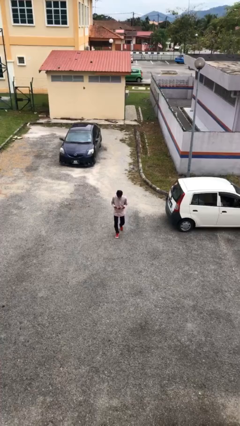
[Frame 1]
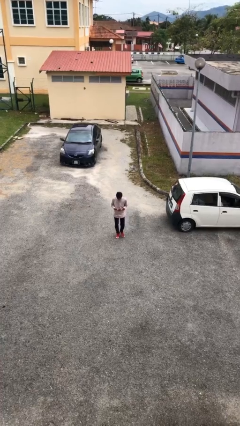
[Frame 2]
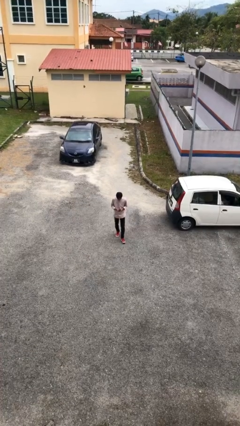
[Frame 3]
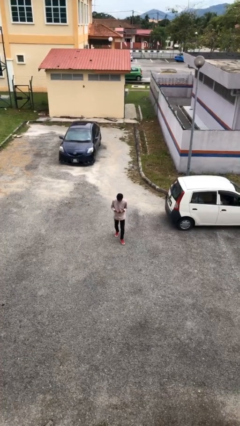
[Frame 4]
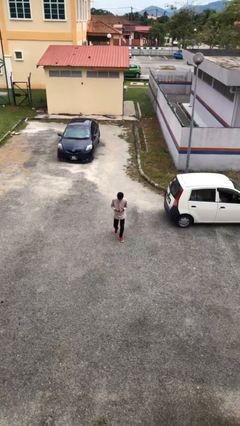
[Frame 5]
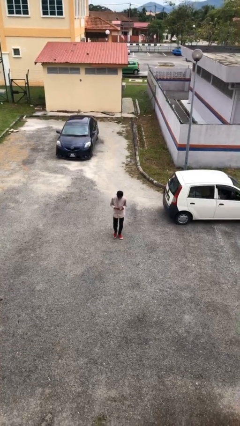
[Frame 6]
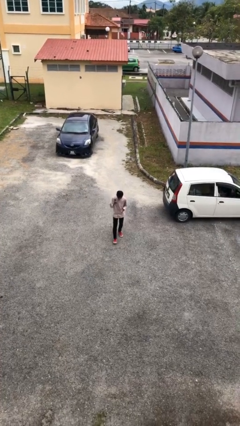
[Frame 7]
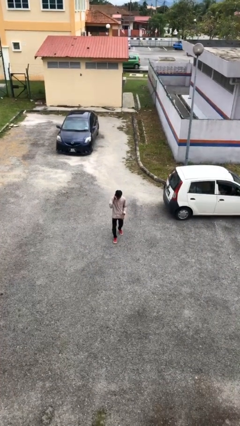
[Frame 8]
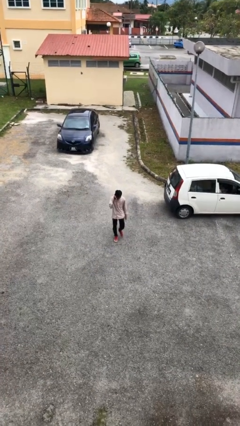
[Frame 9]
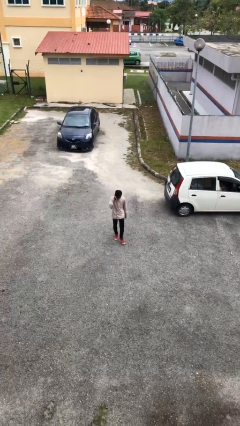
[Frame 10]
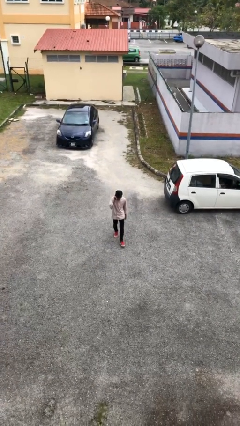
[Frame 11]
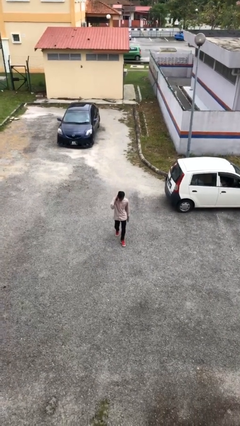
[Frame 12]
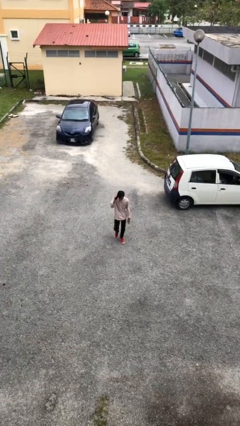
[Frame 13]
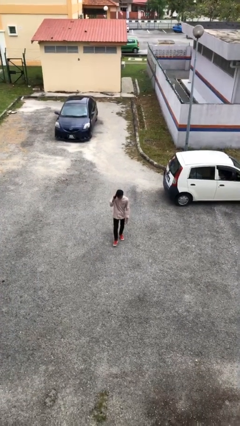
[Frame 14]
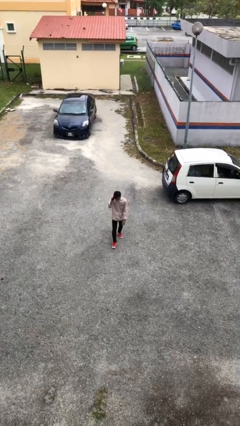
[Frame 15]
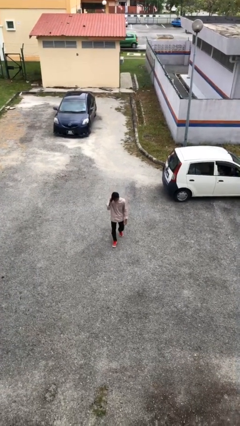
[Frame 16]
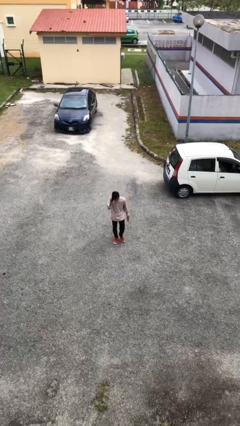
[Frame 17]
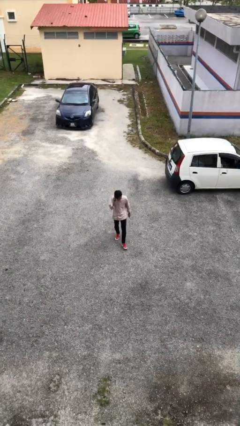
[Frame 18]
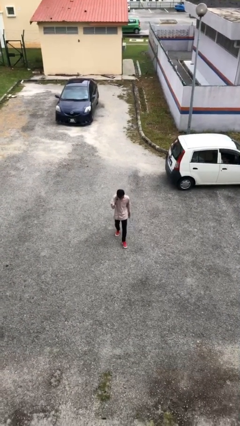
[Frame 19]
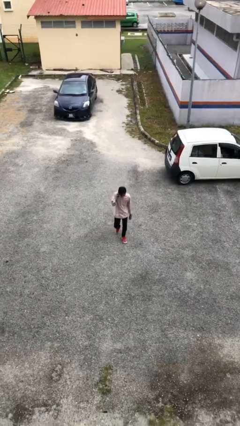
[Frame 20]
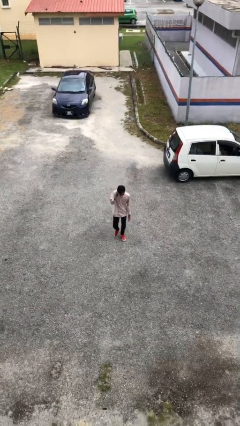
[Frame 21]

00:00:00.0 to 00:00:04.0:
person talks on phone

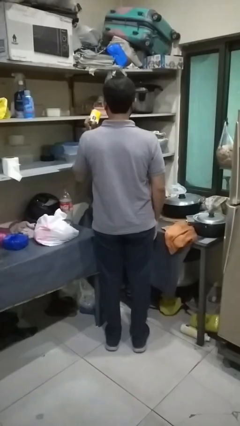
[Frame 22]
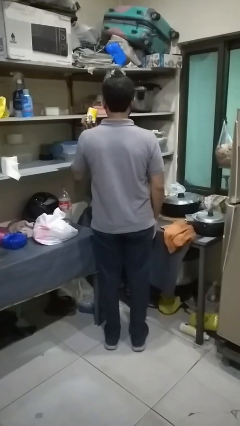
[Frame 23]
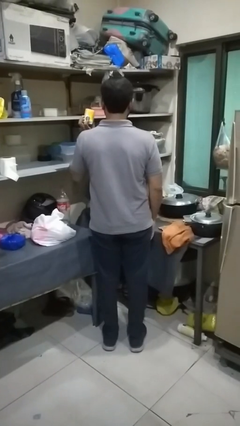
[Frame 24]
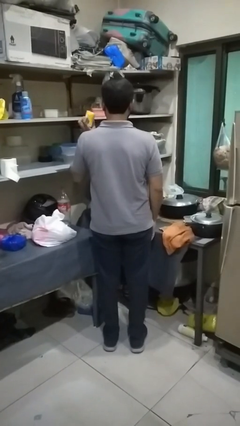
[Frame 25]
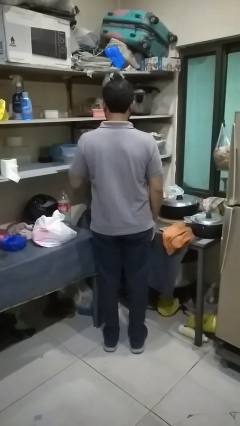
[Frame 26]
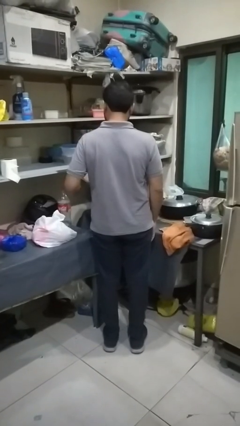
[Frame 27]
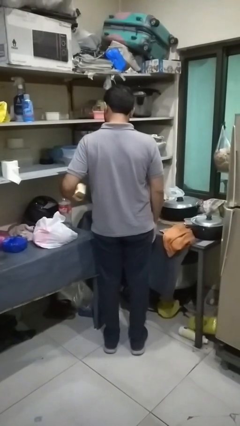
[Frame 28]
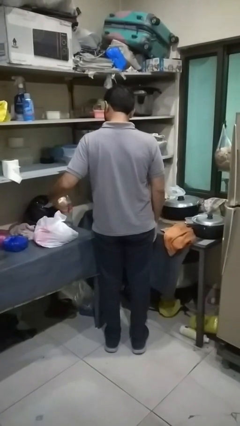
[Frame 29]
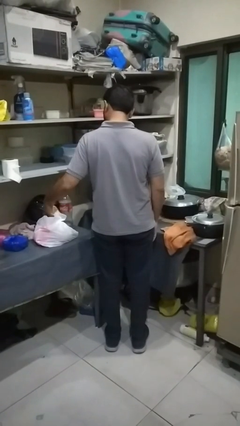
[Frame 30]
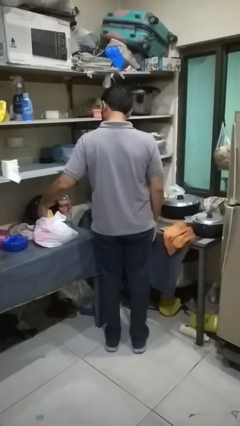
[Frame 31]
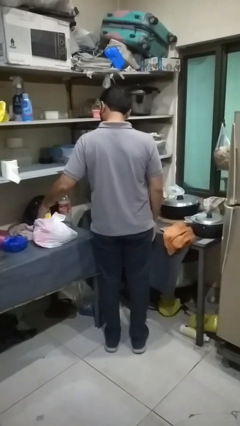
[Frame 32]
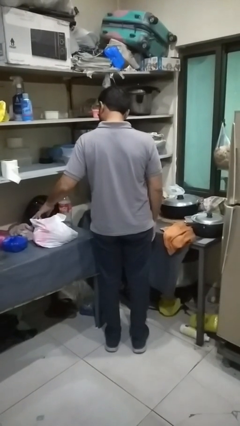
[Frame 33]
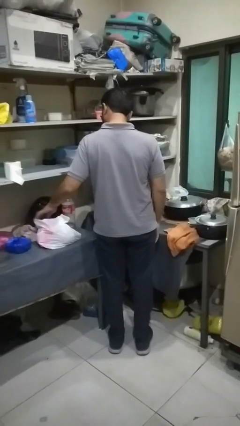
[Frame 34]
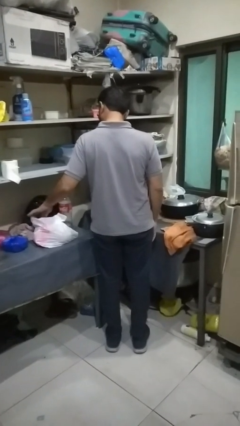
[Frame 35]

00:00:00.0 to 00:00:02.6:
person puts object into bag

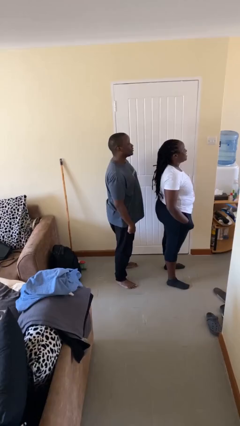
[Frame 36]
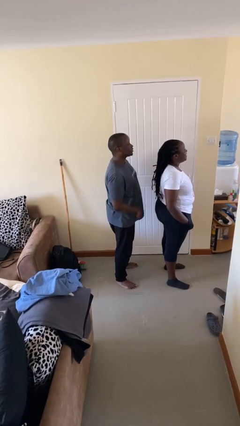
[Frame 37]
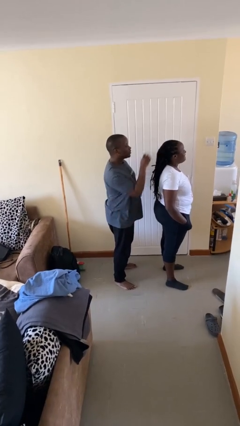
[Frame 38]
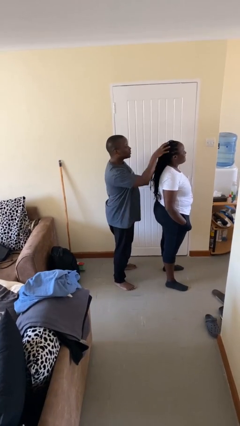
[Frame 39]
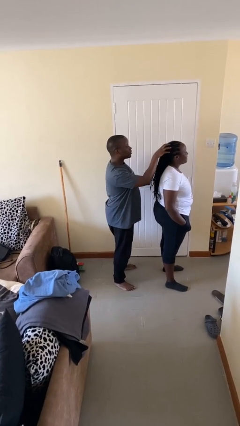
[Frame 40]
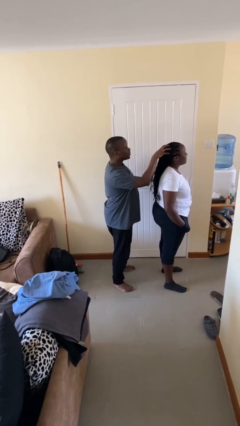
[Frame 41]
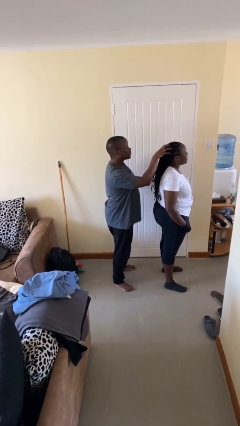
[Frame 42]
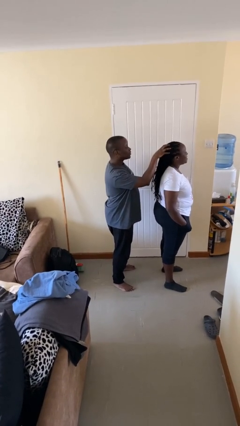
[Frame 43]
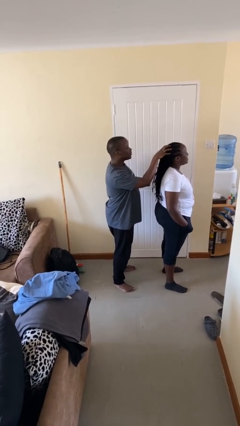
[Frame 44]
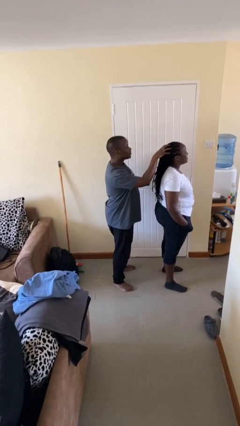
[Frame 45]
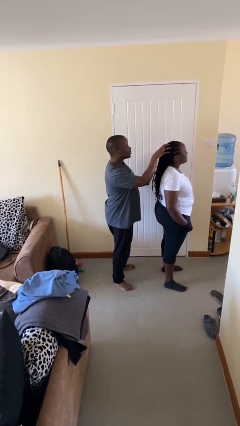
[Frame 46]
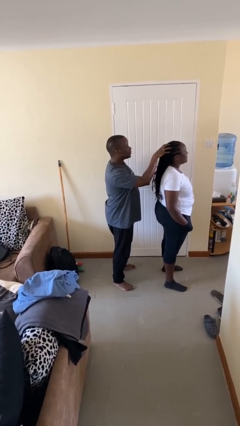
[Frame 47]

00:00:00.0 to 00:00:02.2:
person grabs person by hair

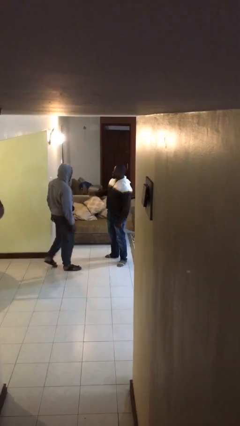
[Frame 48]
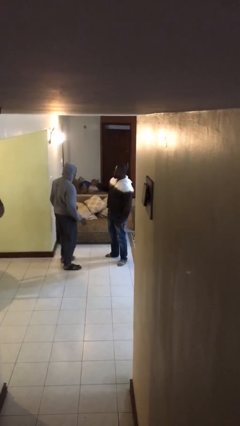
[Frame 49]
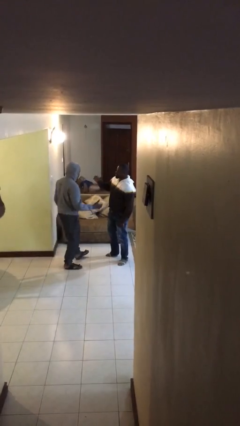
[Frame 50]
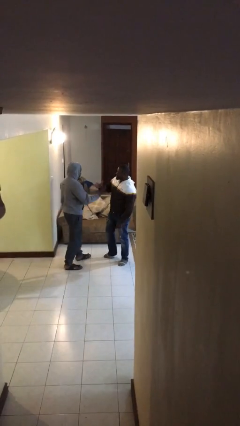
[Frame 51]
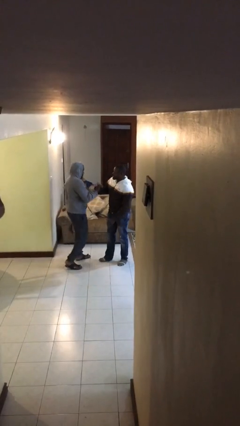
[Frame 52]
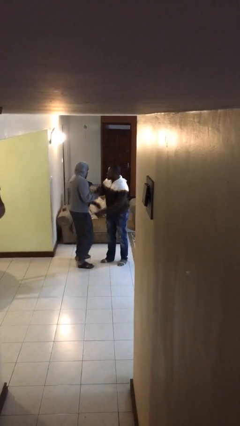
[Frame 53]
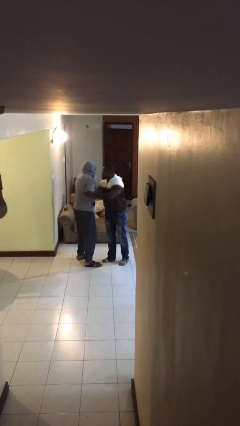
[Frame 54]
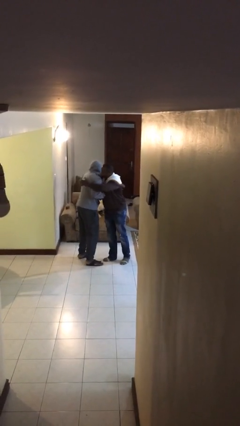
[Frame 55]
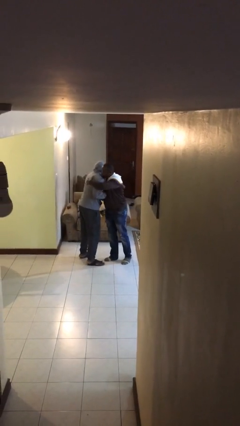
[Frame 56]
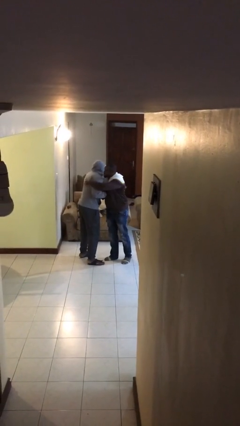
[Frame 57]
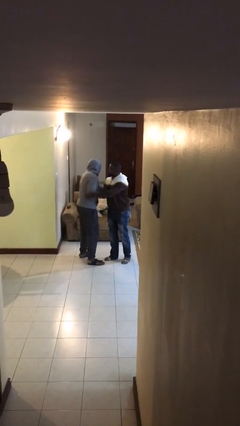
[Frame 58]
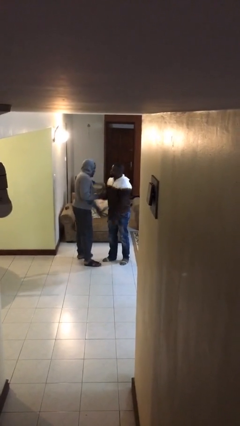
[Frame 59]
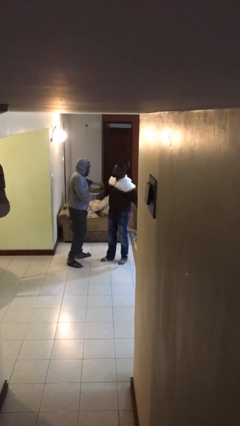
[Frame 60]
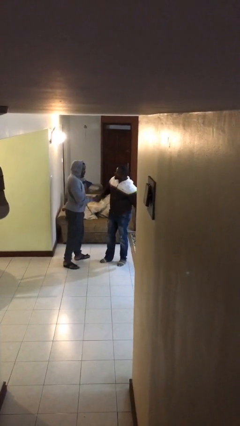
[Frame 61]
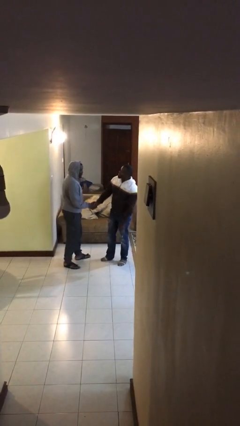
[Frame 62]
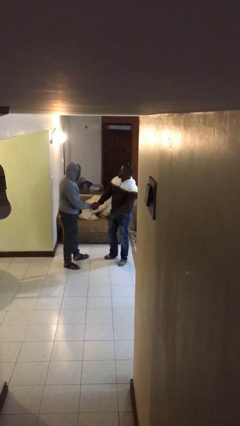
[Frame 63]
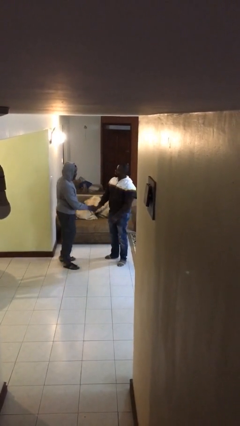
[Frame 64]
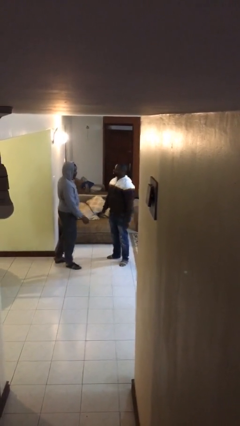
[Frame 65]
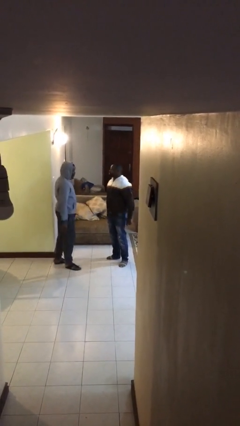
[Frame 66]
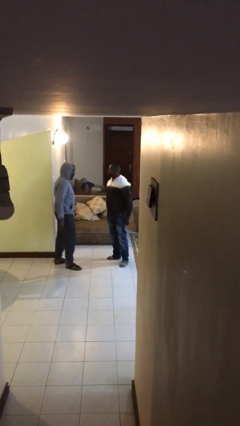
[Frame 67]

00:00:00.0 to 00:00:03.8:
person embraces person

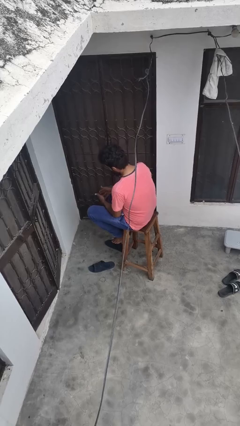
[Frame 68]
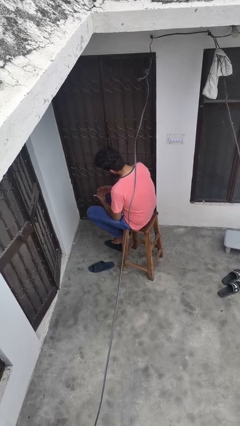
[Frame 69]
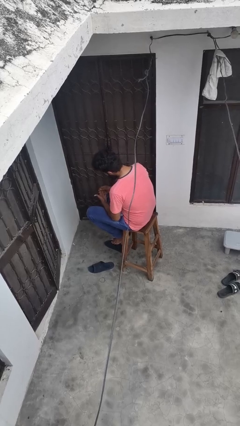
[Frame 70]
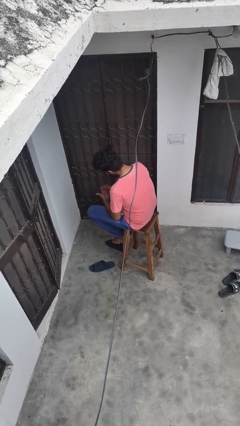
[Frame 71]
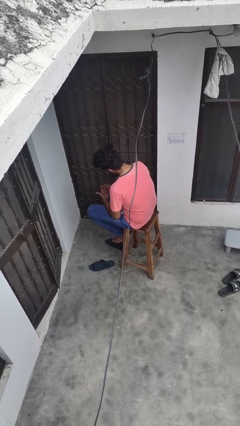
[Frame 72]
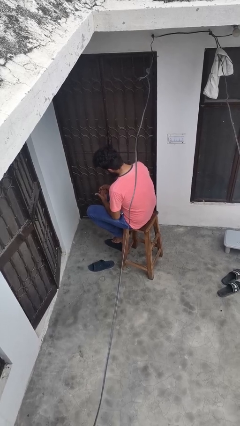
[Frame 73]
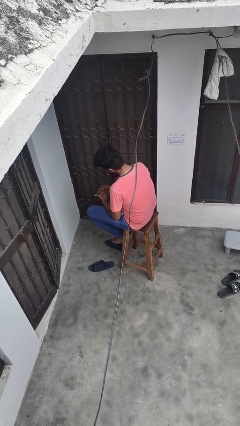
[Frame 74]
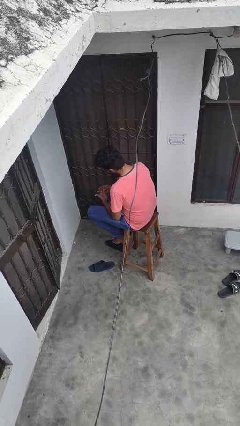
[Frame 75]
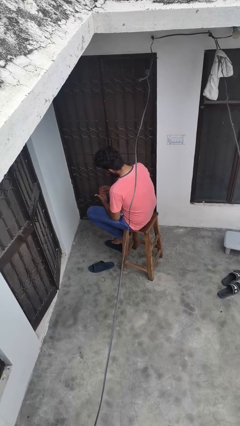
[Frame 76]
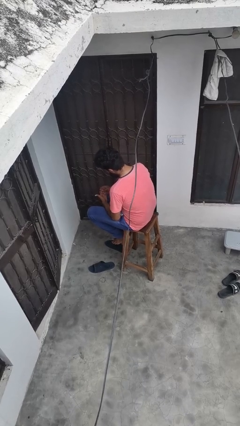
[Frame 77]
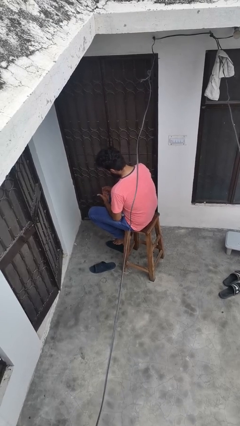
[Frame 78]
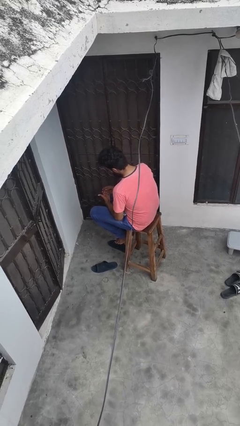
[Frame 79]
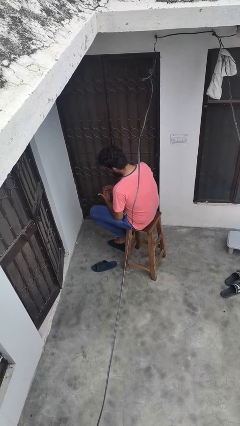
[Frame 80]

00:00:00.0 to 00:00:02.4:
person looks at hands in lap

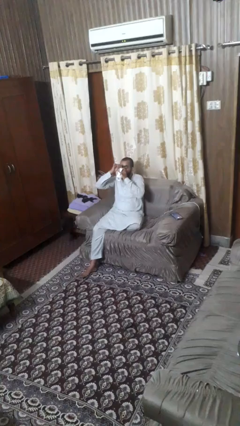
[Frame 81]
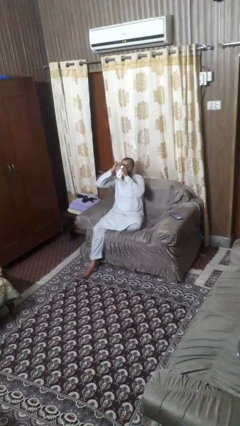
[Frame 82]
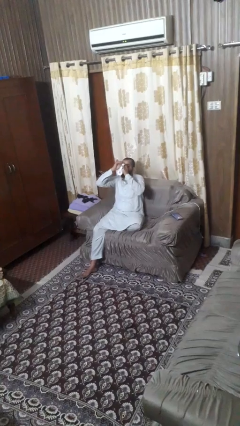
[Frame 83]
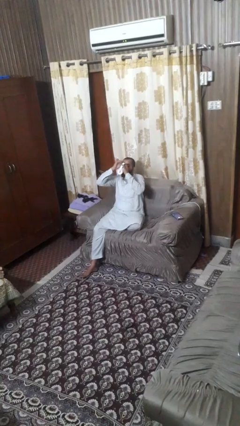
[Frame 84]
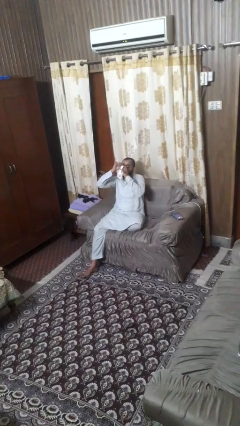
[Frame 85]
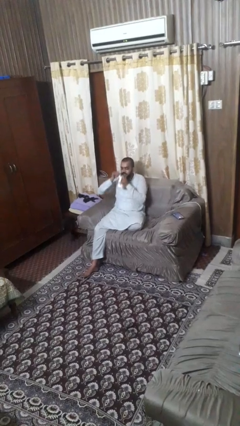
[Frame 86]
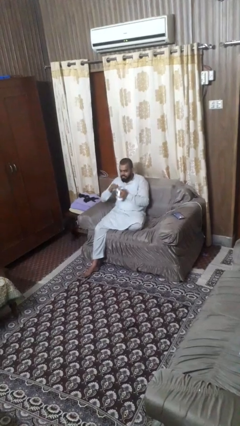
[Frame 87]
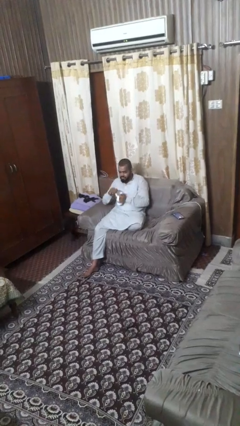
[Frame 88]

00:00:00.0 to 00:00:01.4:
person drinks from mug

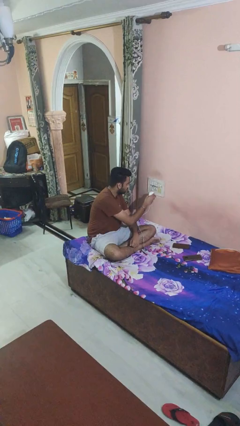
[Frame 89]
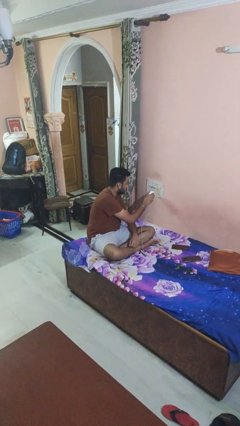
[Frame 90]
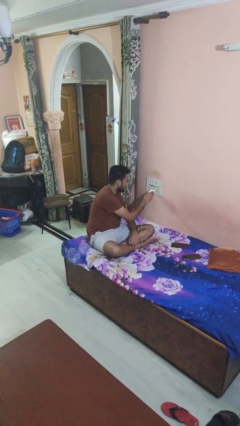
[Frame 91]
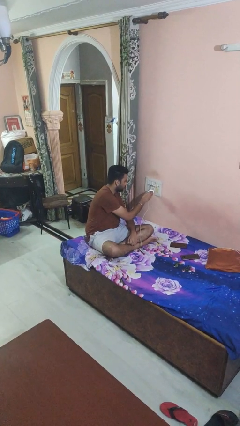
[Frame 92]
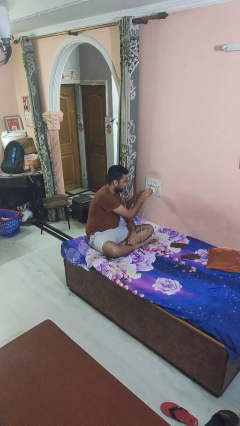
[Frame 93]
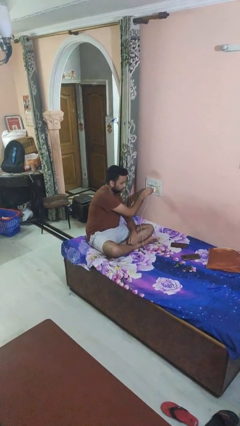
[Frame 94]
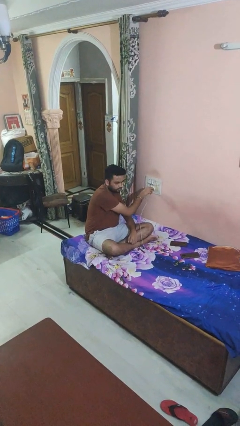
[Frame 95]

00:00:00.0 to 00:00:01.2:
person plugs into electrical socket
